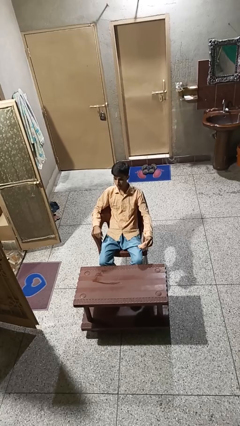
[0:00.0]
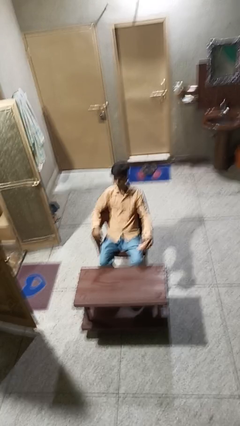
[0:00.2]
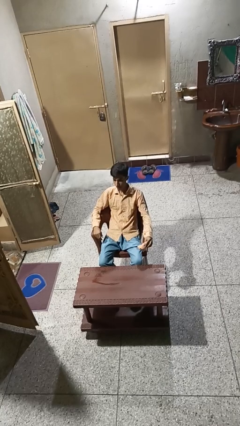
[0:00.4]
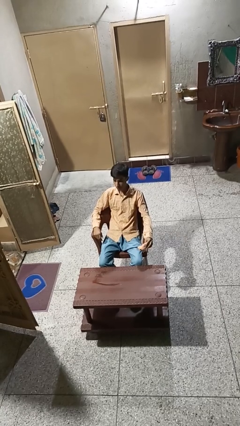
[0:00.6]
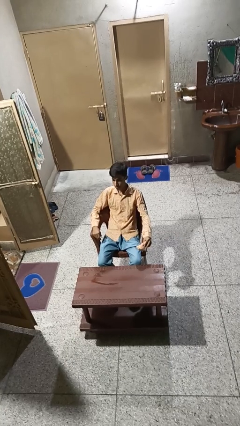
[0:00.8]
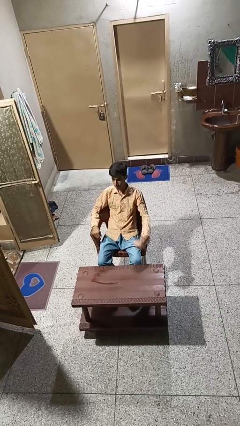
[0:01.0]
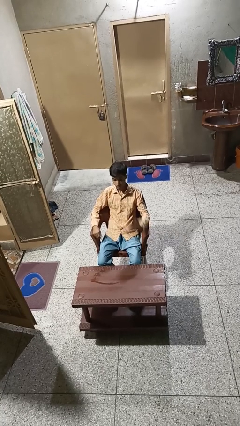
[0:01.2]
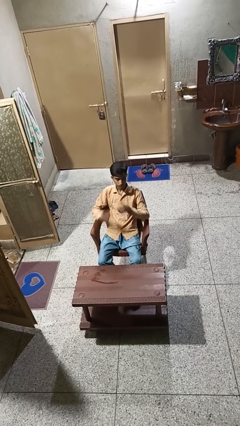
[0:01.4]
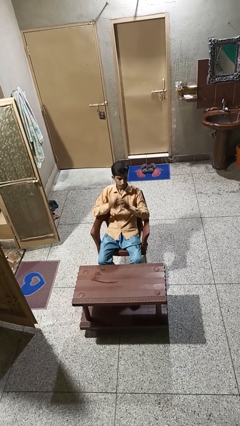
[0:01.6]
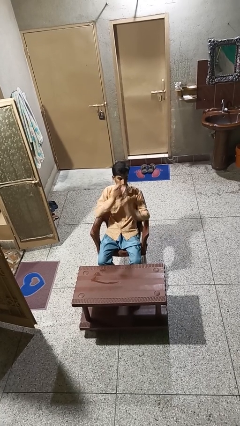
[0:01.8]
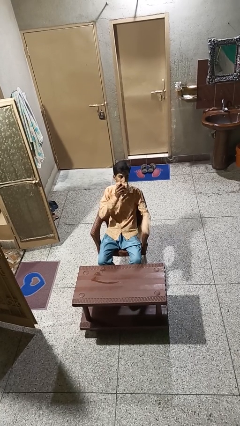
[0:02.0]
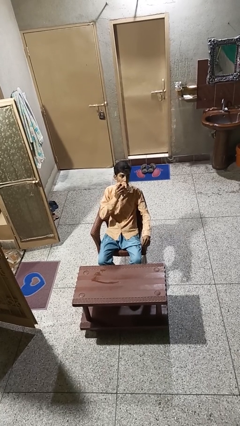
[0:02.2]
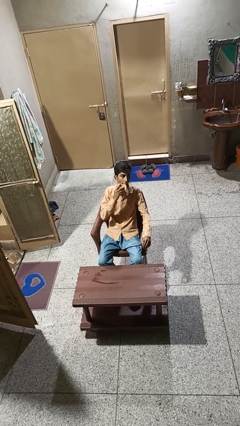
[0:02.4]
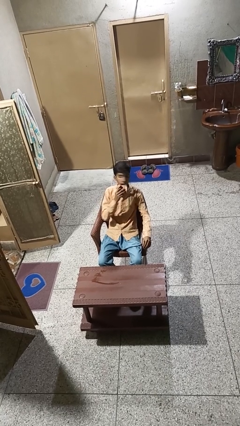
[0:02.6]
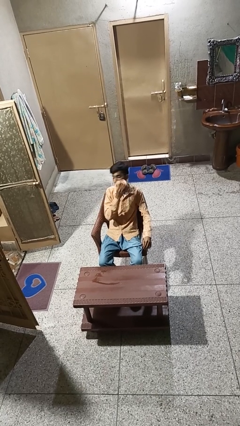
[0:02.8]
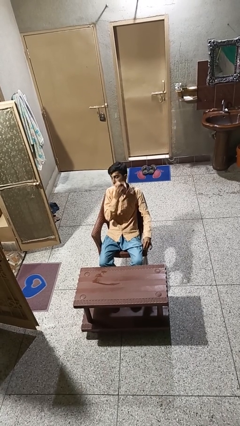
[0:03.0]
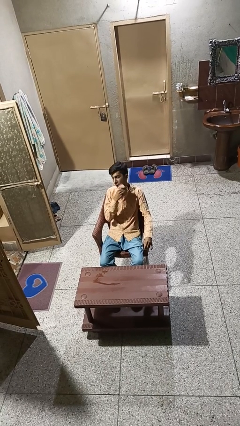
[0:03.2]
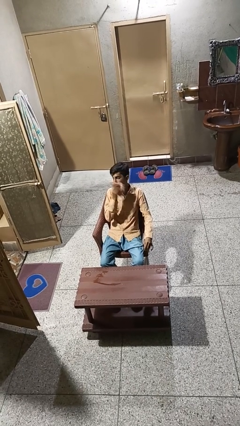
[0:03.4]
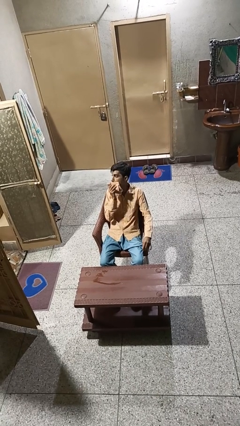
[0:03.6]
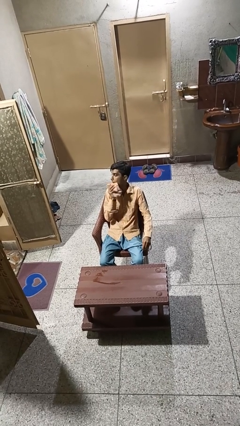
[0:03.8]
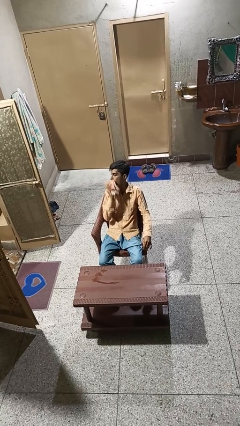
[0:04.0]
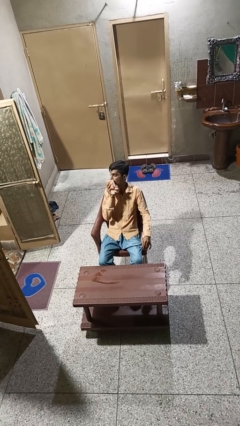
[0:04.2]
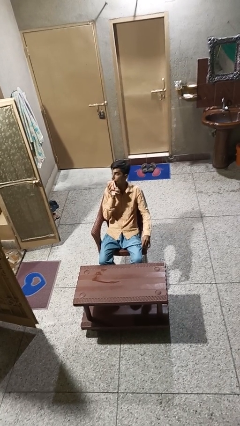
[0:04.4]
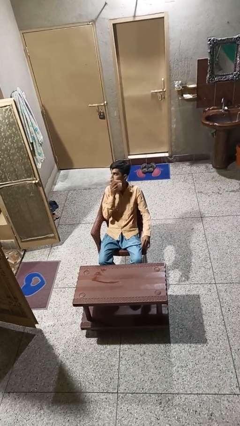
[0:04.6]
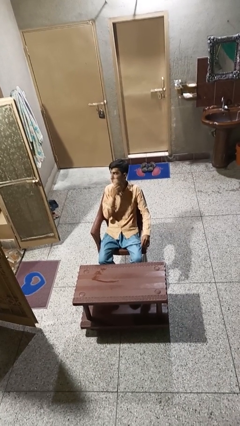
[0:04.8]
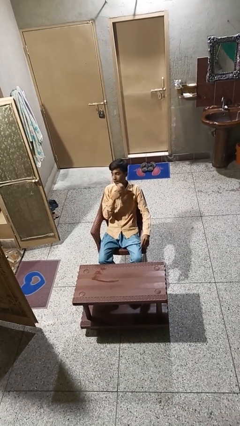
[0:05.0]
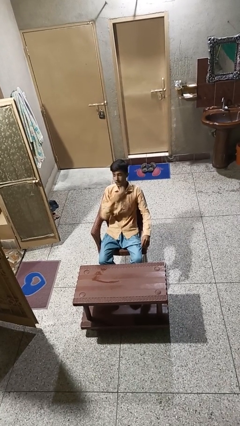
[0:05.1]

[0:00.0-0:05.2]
person wipes mouth with napkin

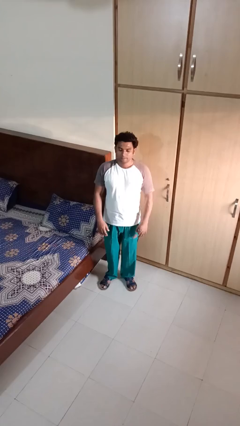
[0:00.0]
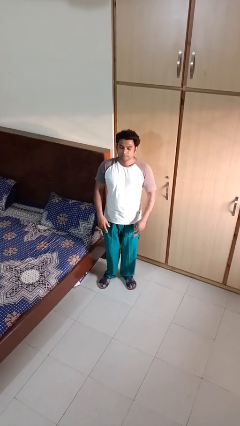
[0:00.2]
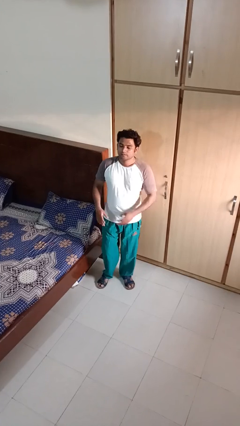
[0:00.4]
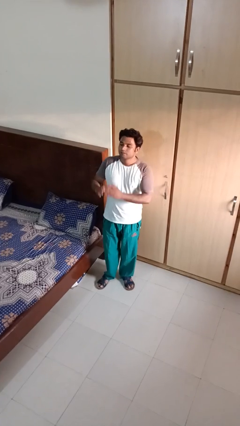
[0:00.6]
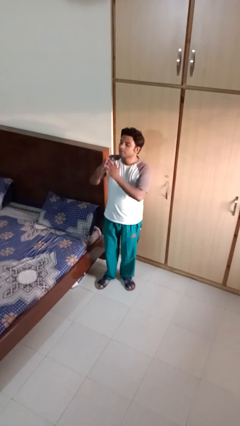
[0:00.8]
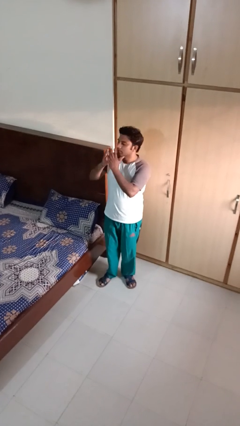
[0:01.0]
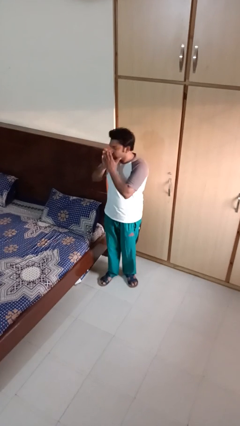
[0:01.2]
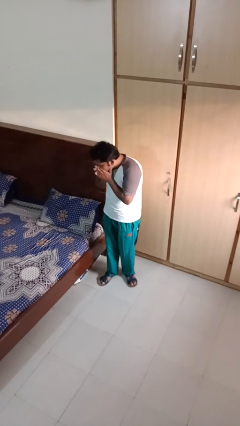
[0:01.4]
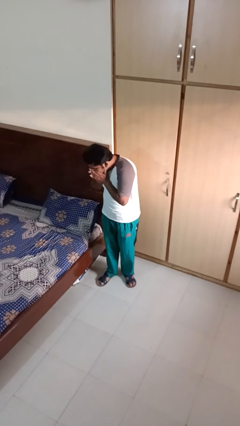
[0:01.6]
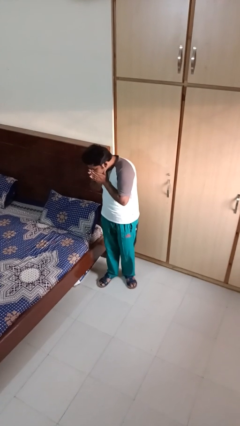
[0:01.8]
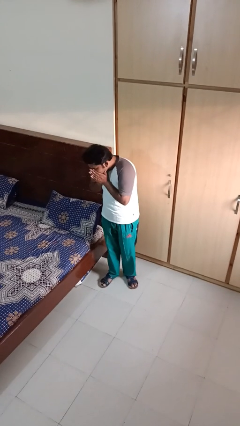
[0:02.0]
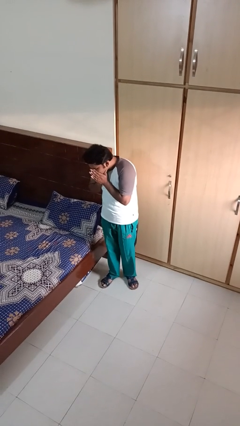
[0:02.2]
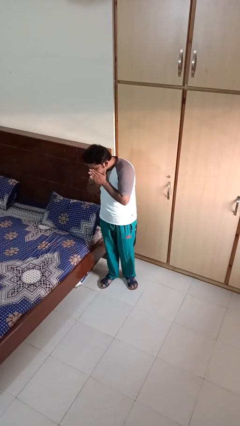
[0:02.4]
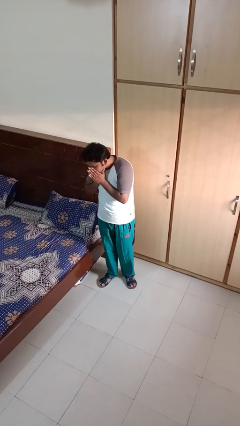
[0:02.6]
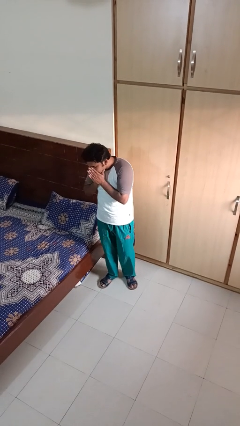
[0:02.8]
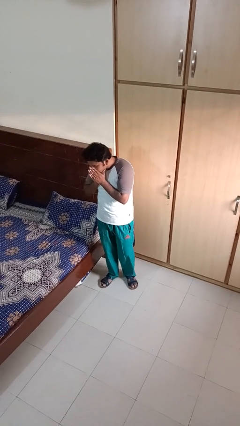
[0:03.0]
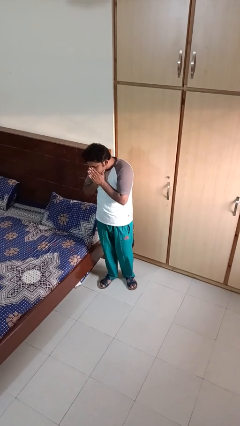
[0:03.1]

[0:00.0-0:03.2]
person sneezes into hand

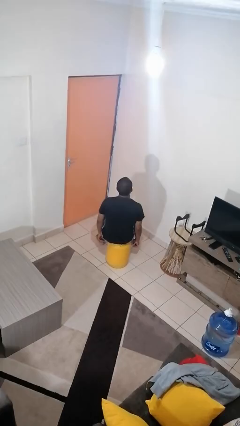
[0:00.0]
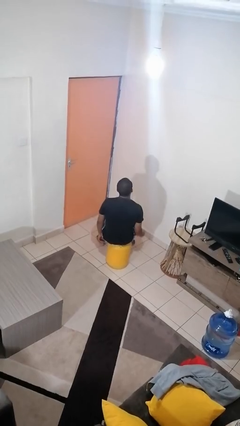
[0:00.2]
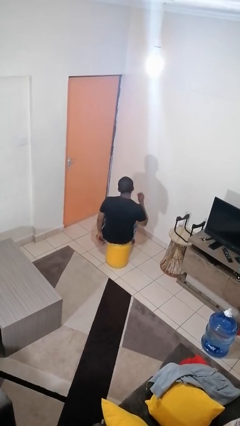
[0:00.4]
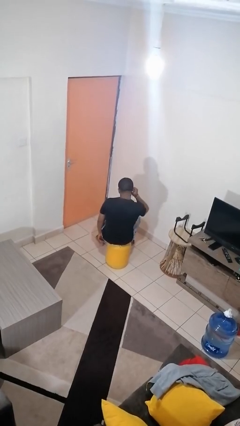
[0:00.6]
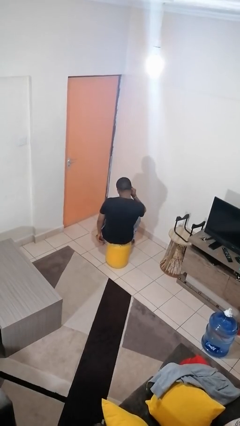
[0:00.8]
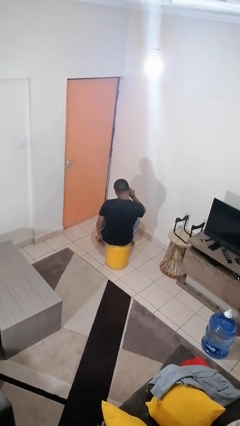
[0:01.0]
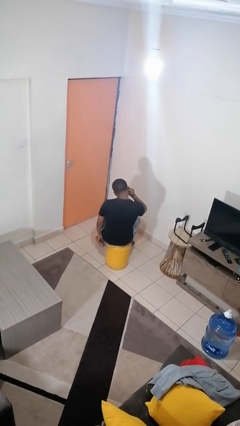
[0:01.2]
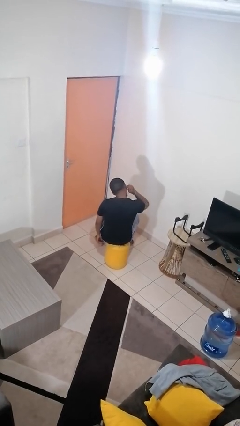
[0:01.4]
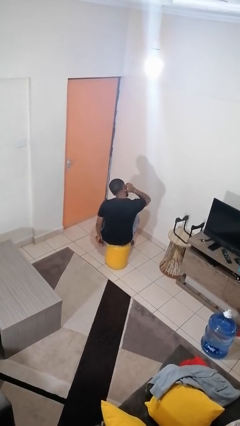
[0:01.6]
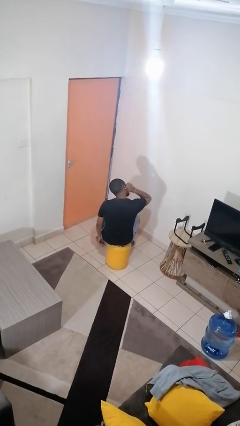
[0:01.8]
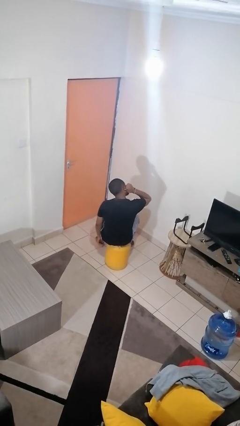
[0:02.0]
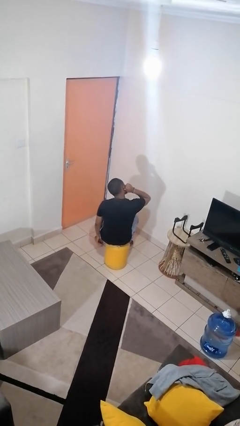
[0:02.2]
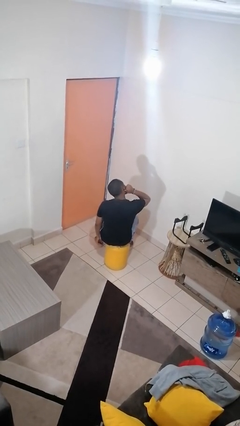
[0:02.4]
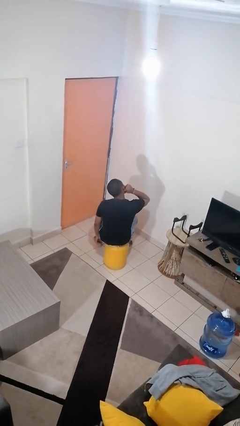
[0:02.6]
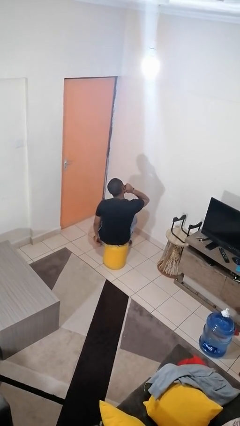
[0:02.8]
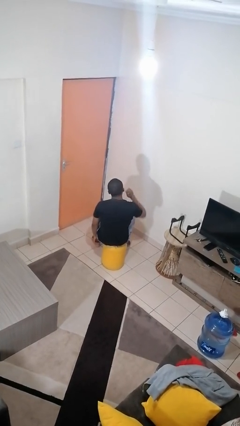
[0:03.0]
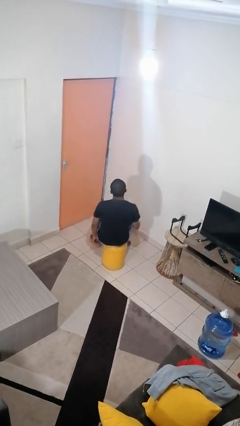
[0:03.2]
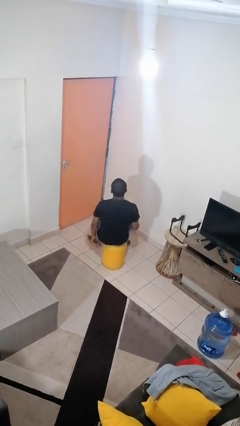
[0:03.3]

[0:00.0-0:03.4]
person touches earlobe

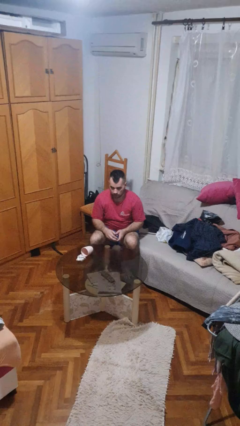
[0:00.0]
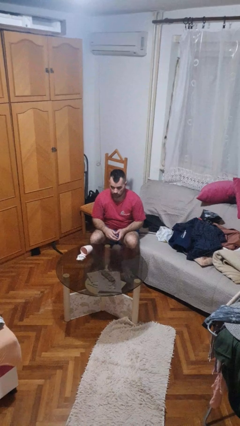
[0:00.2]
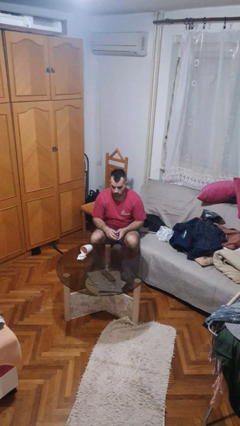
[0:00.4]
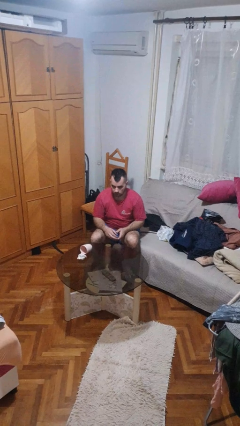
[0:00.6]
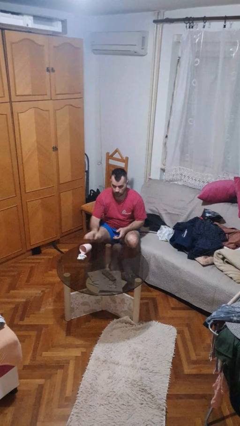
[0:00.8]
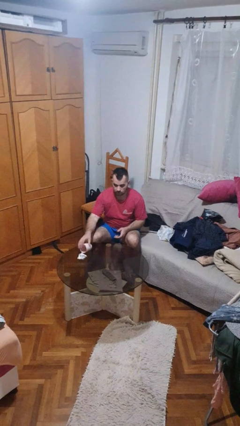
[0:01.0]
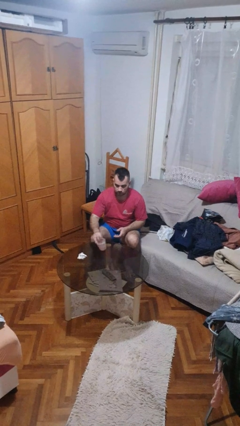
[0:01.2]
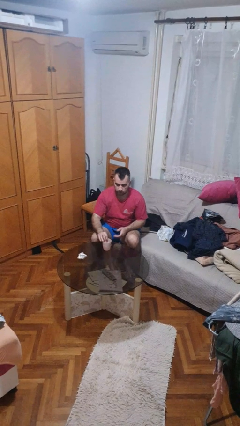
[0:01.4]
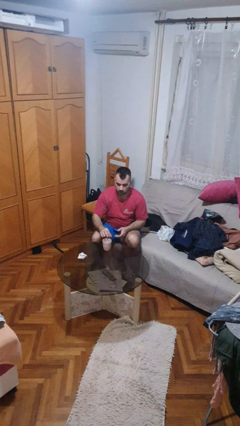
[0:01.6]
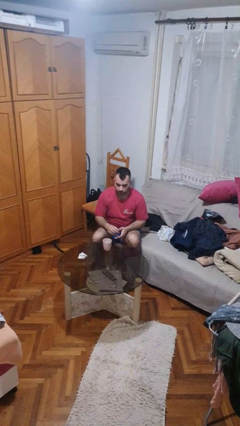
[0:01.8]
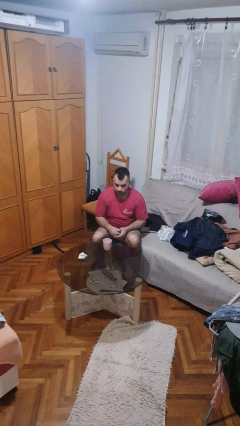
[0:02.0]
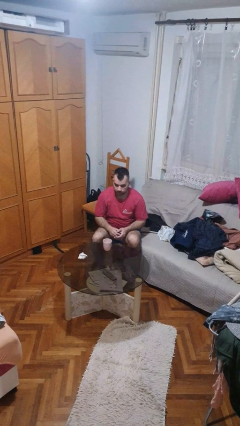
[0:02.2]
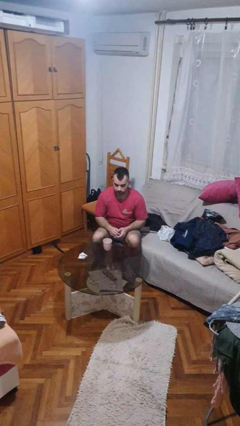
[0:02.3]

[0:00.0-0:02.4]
person sets upright glass

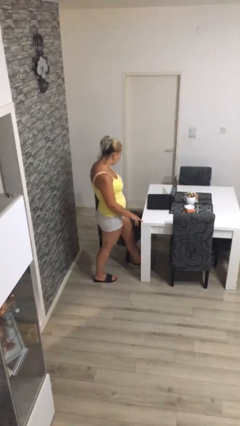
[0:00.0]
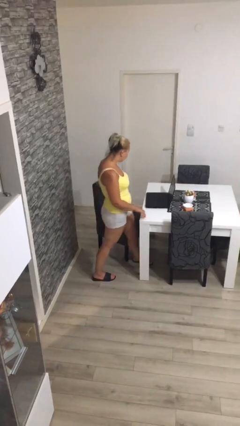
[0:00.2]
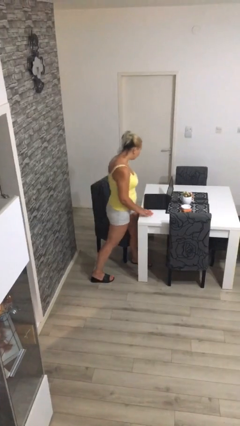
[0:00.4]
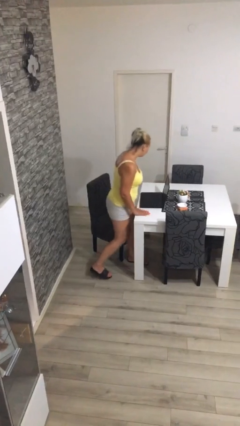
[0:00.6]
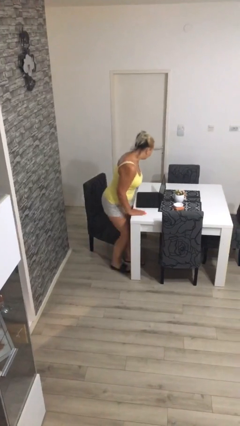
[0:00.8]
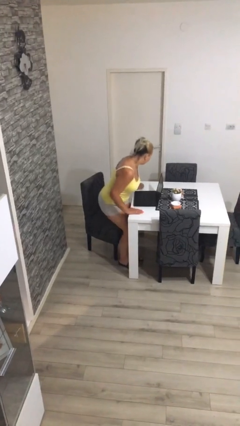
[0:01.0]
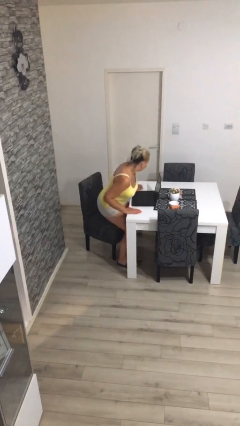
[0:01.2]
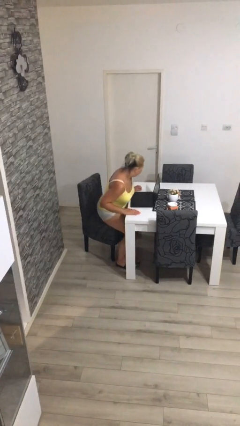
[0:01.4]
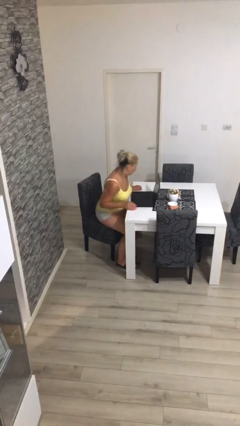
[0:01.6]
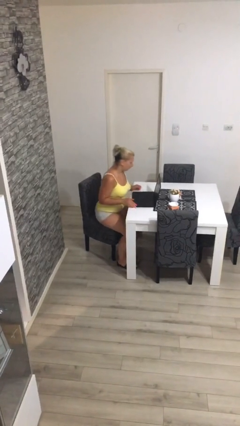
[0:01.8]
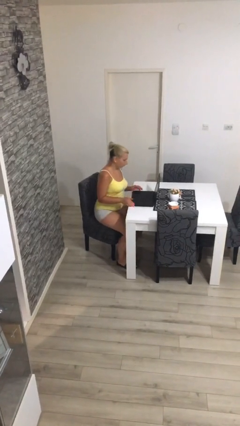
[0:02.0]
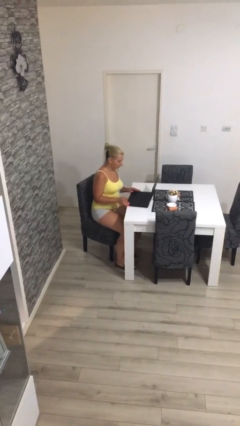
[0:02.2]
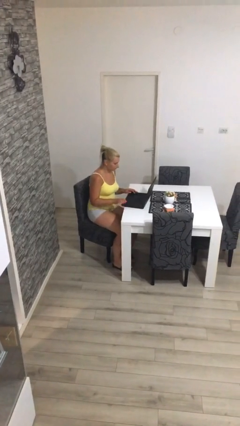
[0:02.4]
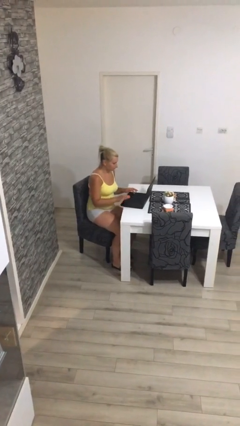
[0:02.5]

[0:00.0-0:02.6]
person sits down

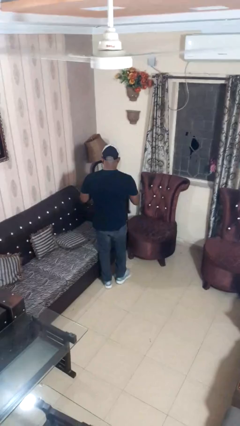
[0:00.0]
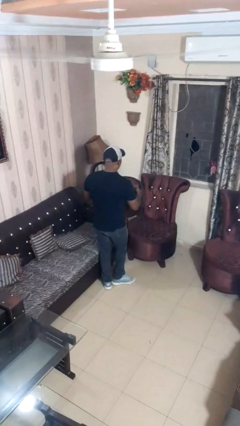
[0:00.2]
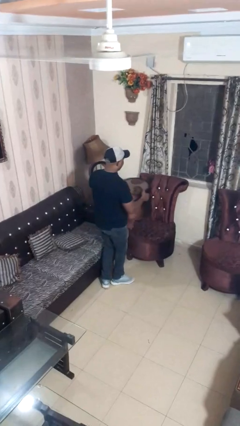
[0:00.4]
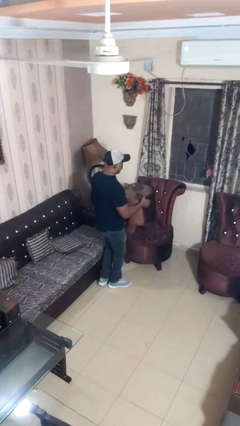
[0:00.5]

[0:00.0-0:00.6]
person carries furniture
